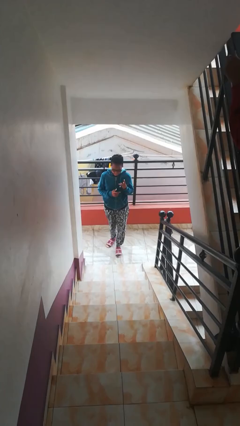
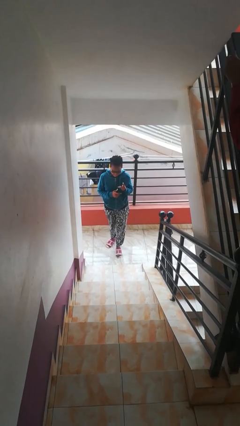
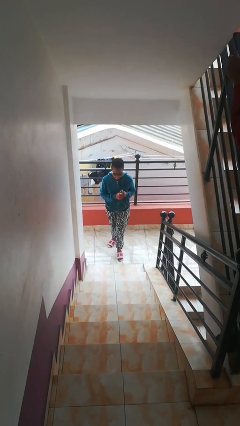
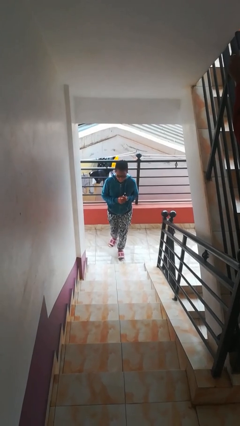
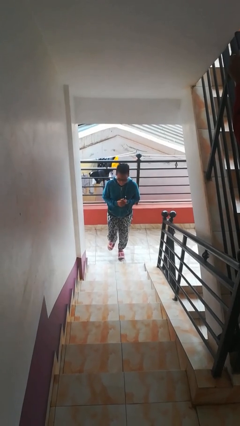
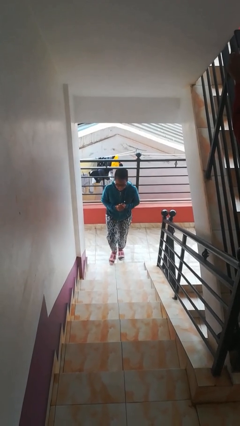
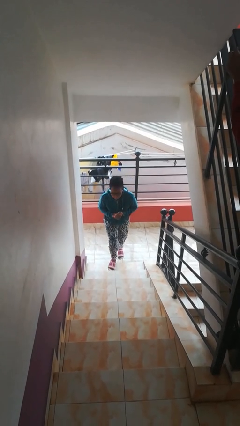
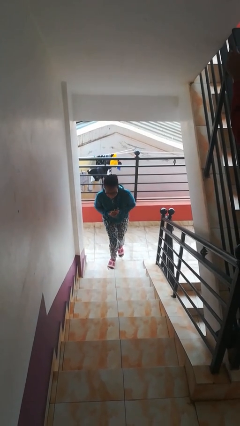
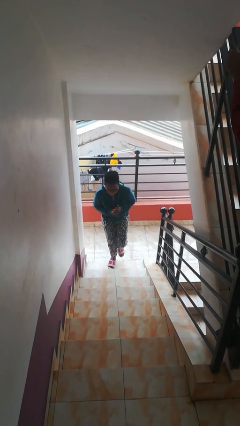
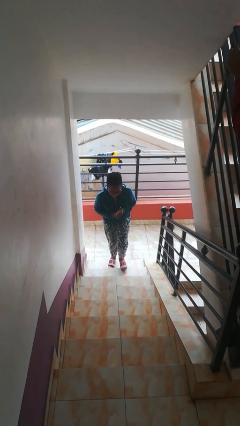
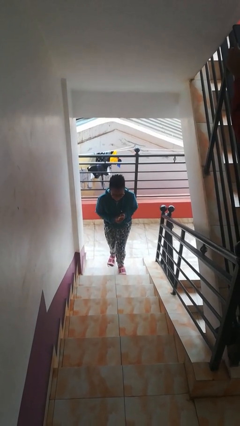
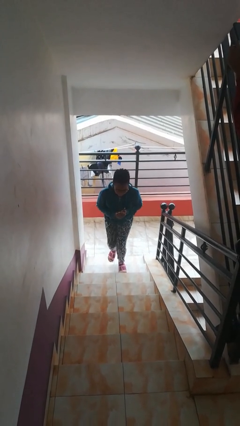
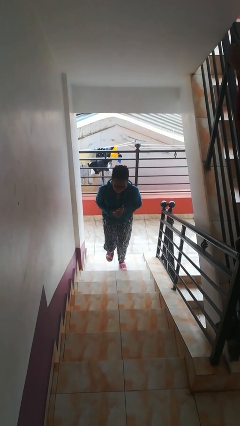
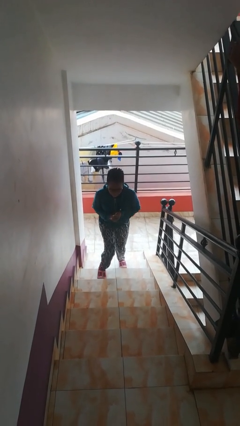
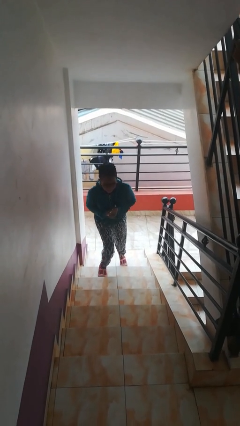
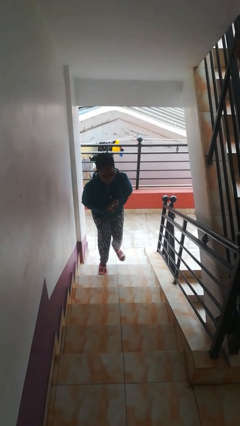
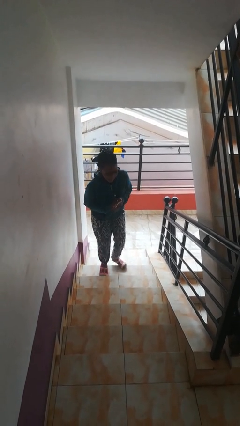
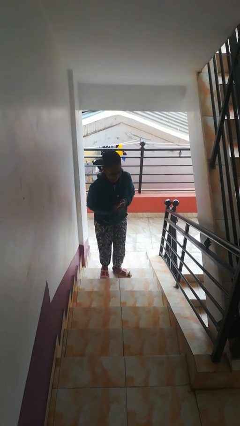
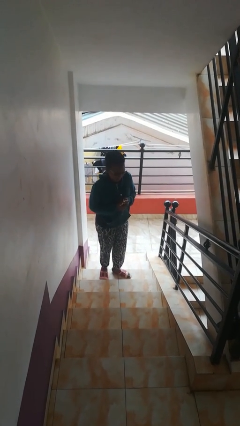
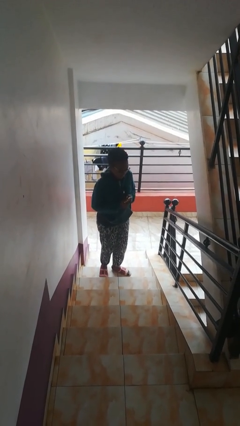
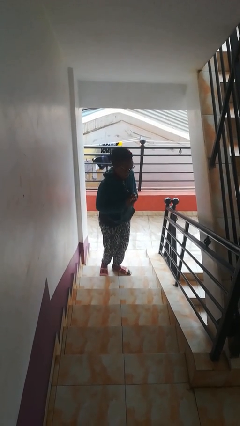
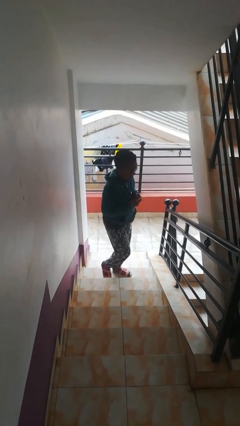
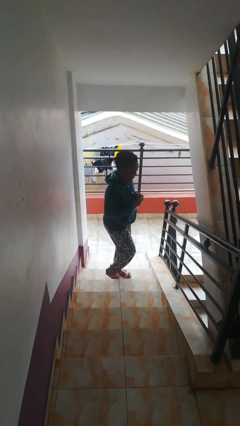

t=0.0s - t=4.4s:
person climbs up stairs

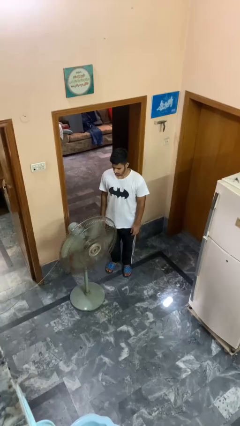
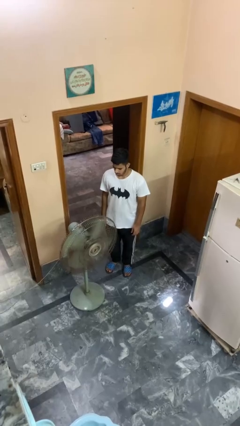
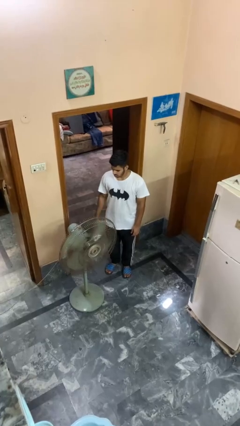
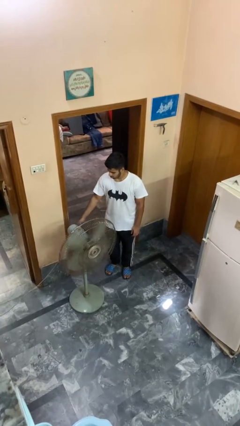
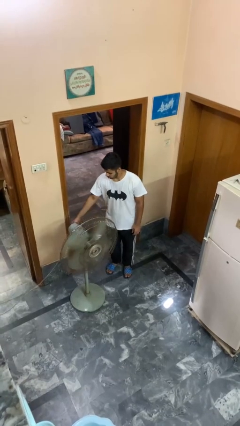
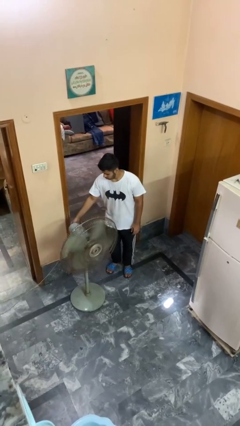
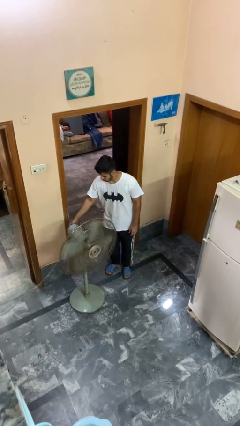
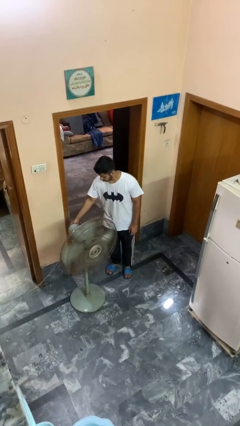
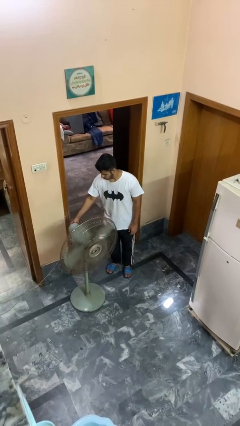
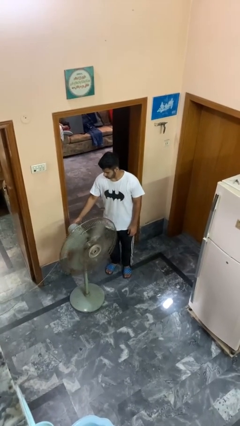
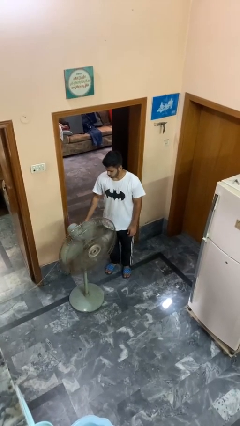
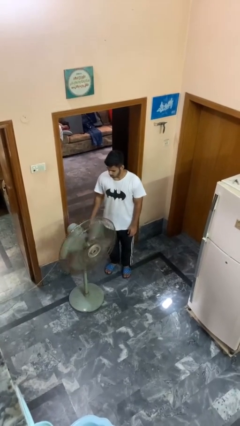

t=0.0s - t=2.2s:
person turns off fan

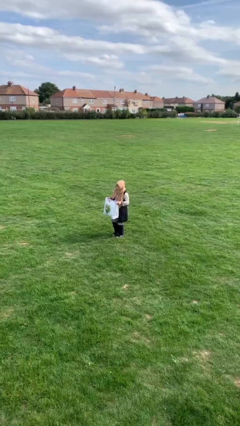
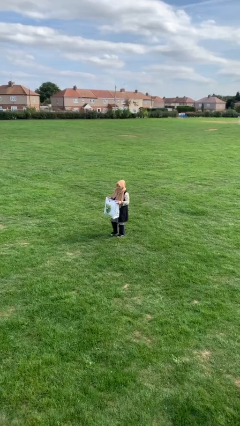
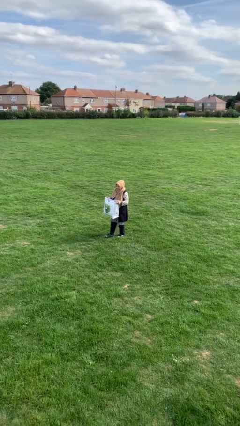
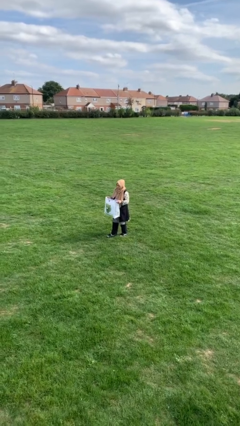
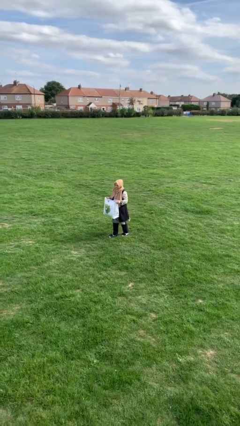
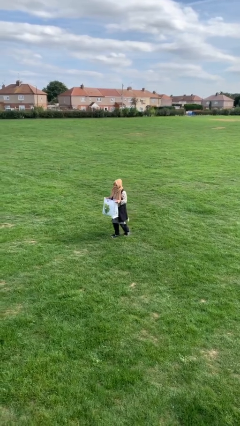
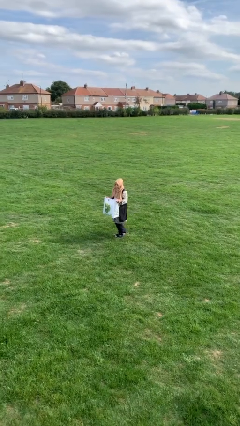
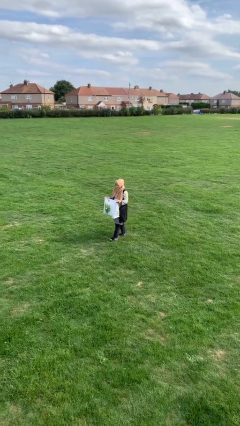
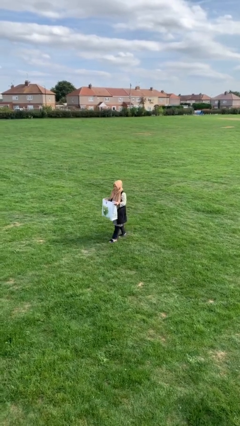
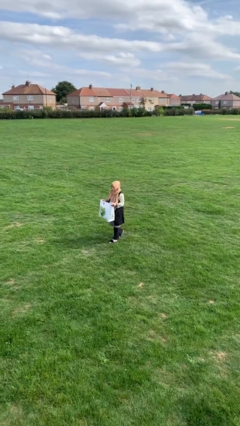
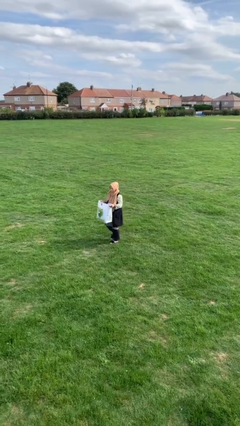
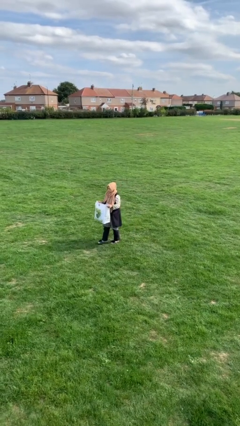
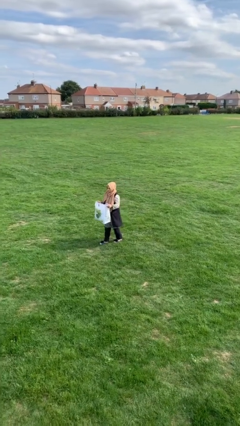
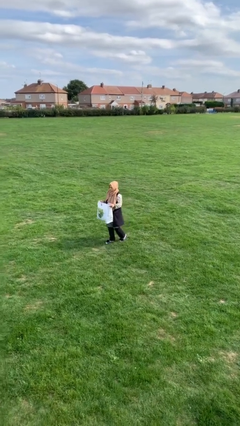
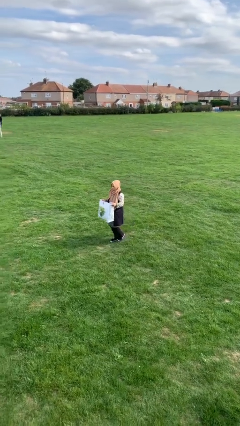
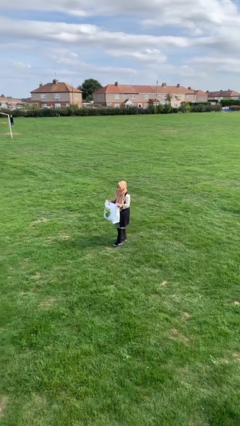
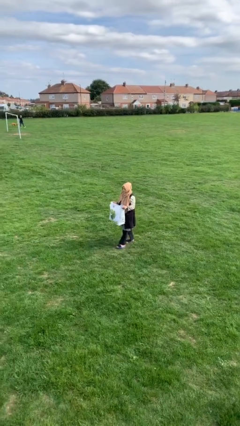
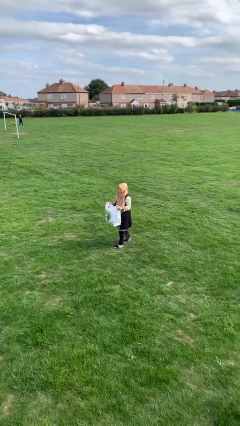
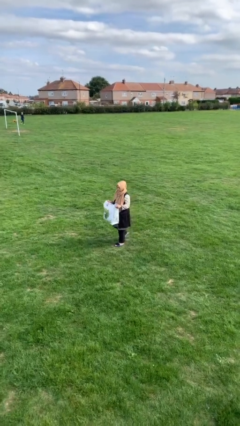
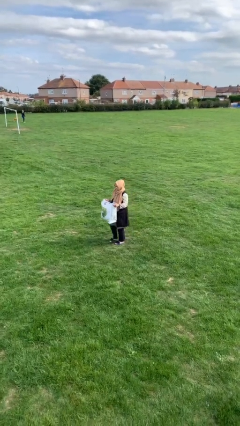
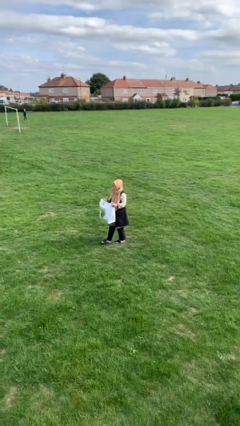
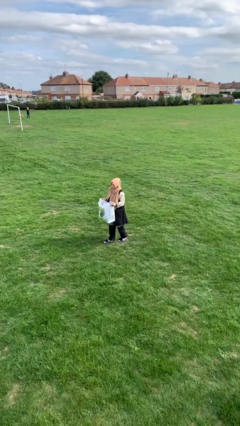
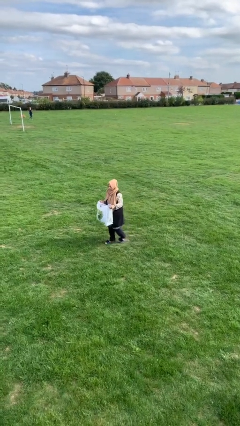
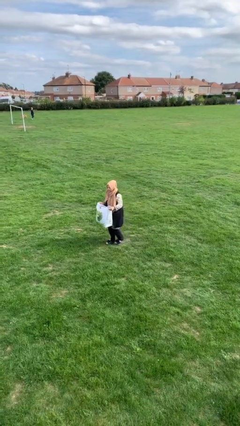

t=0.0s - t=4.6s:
person carries heavy object

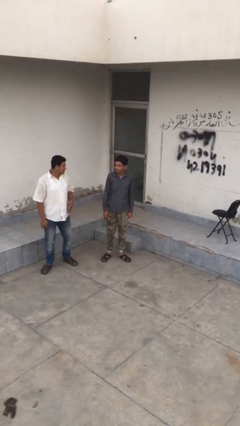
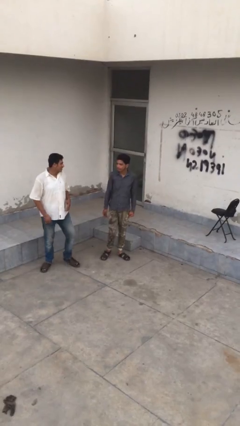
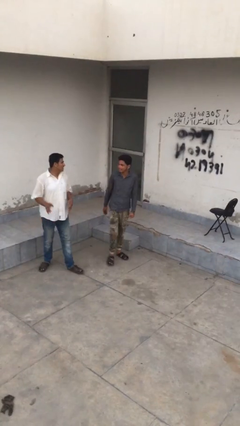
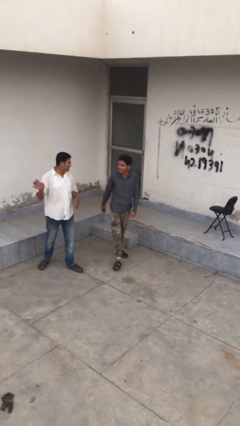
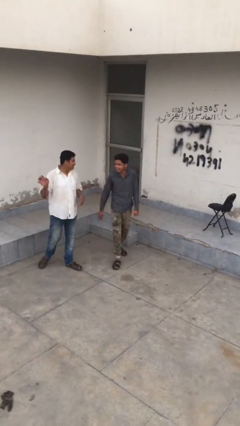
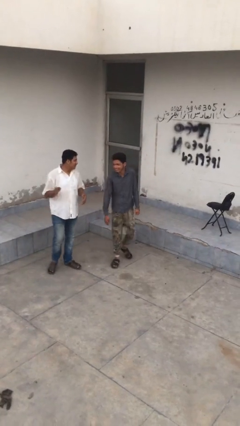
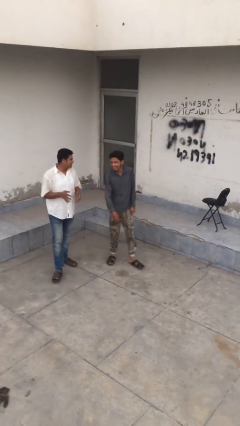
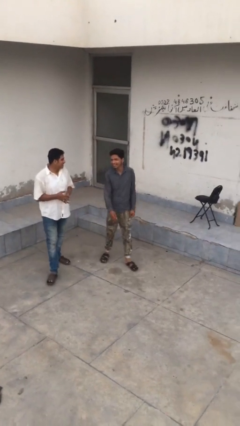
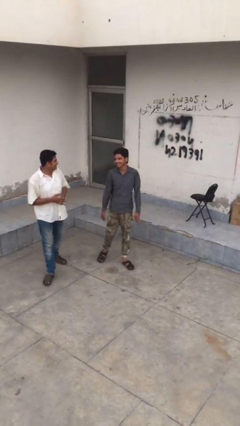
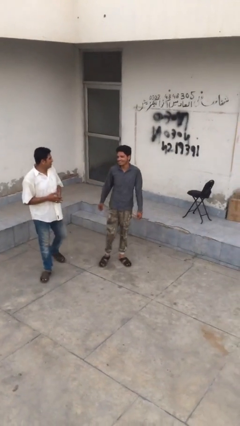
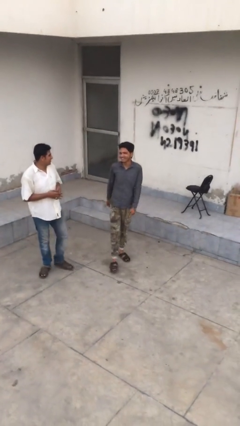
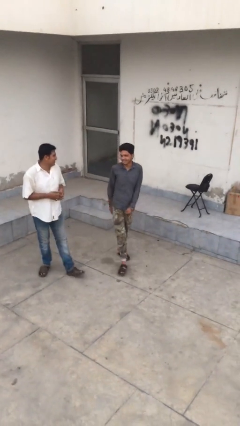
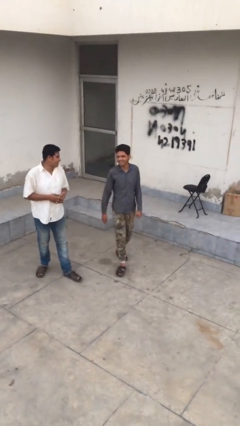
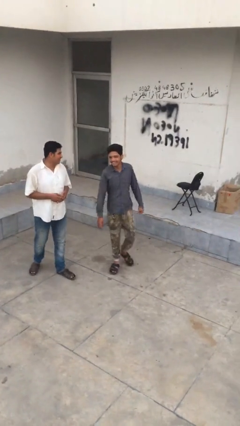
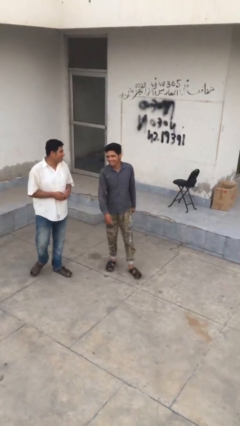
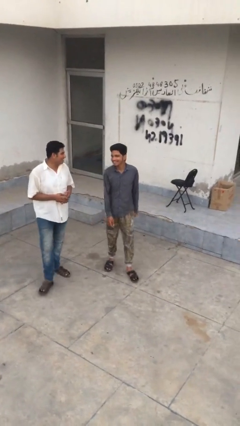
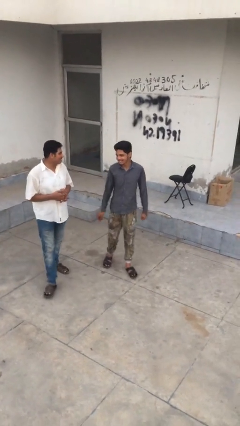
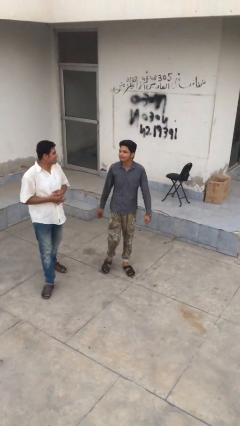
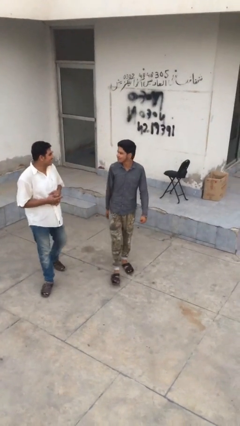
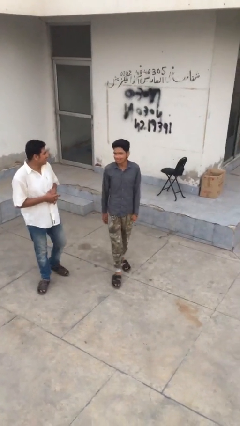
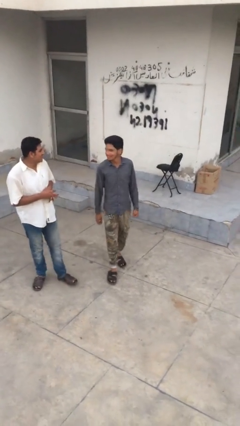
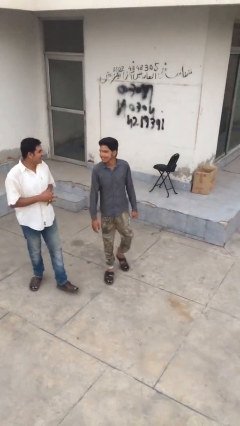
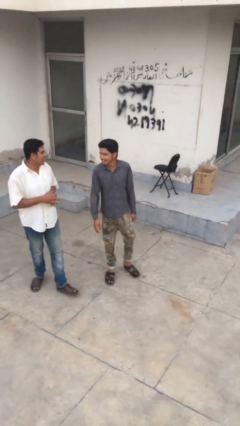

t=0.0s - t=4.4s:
person talks to person

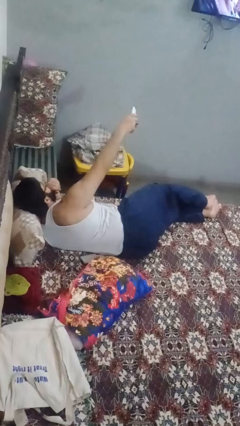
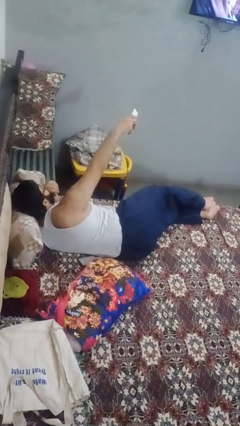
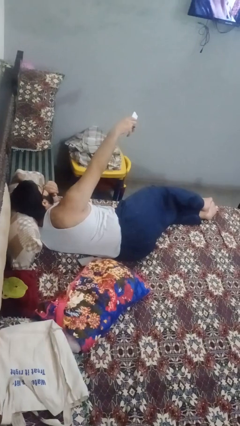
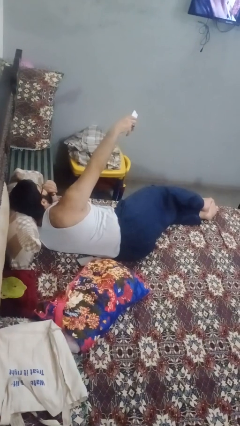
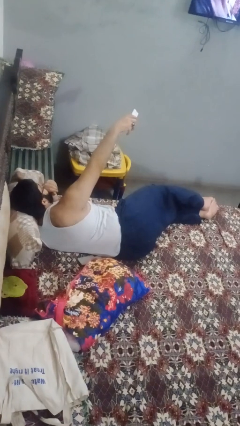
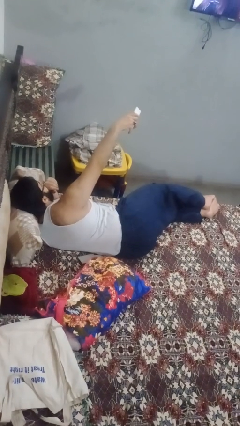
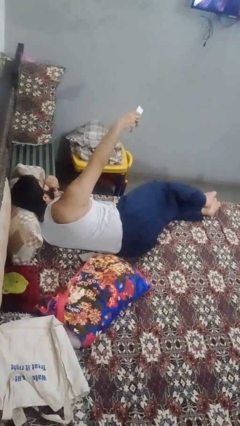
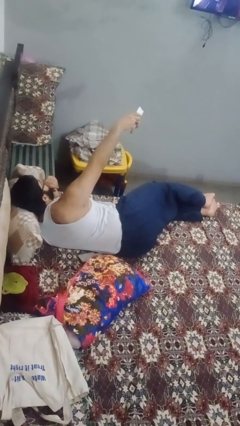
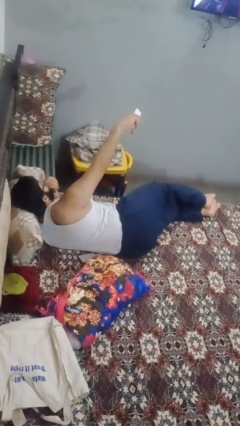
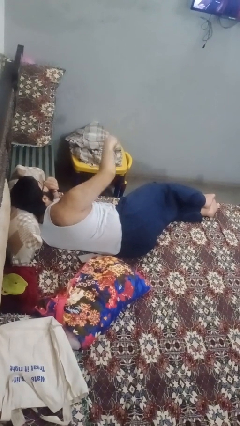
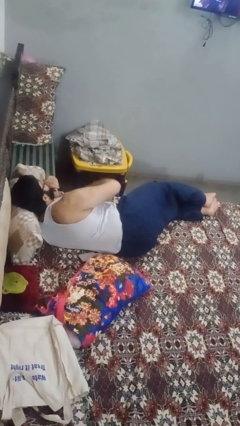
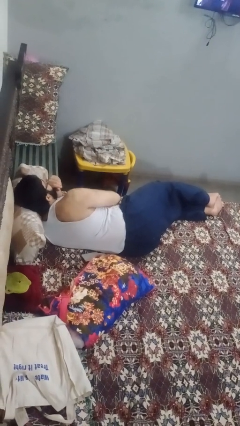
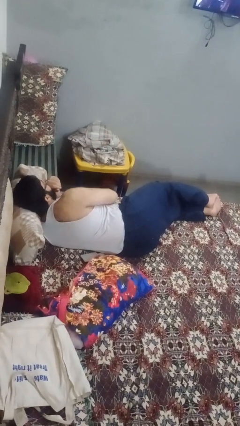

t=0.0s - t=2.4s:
person uses television remote
